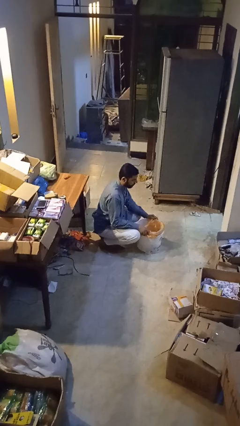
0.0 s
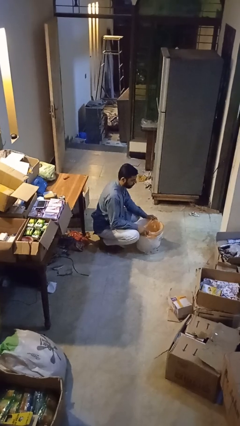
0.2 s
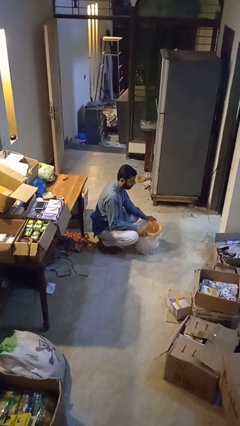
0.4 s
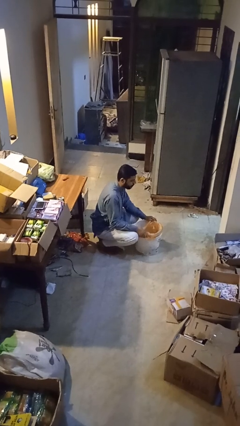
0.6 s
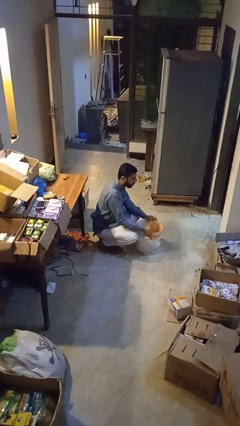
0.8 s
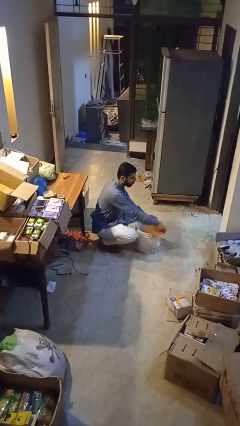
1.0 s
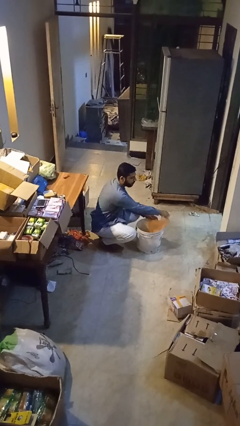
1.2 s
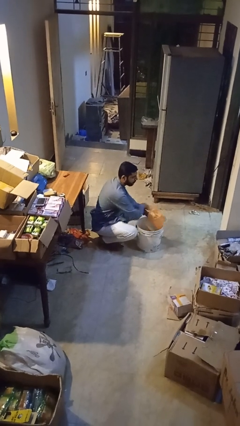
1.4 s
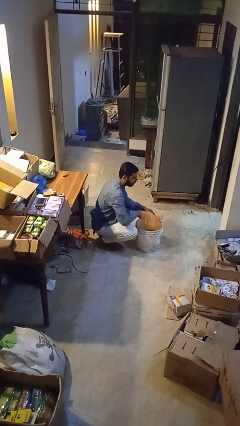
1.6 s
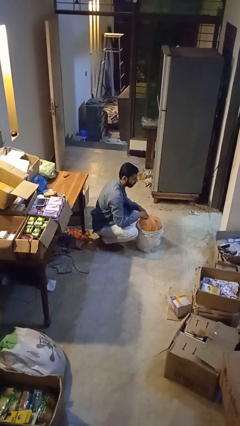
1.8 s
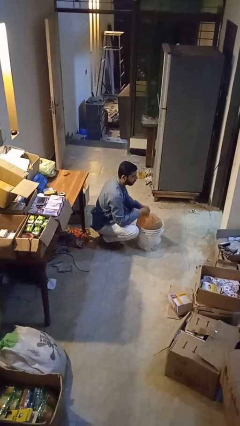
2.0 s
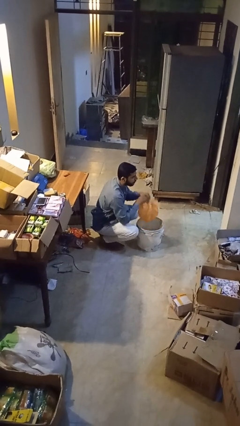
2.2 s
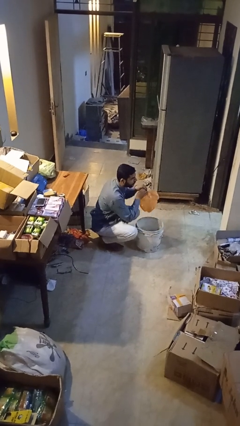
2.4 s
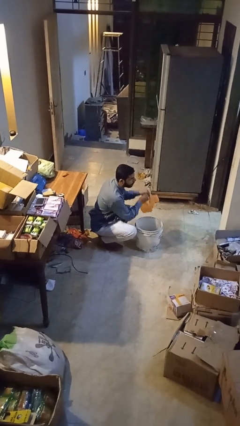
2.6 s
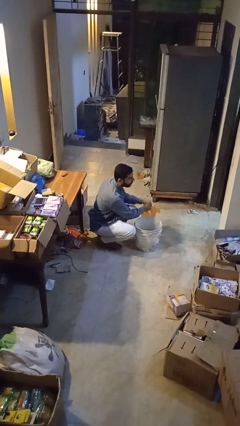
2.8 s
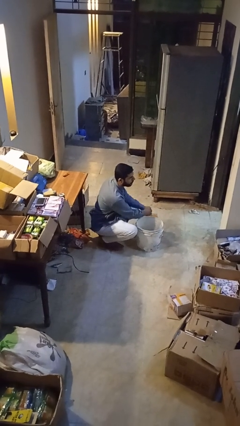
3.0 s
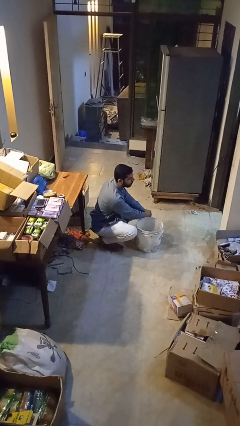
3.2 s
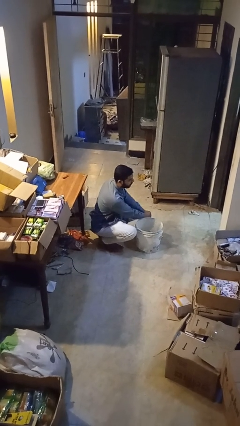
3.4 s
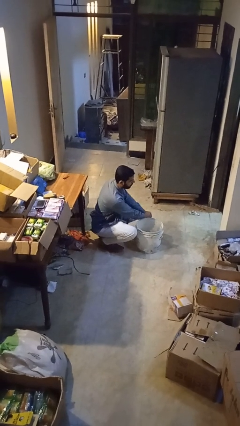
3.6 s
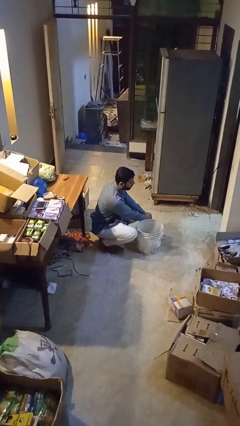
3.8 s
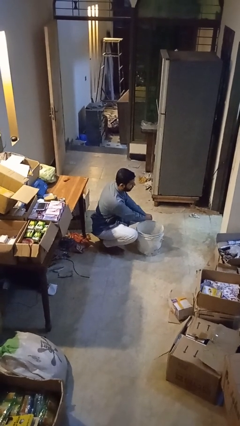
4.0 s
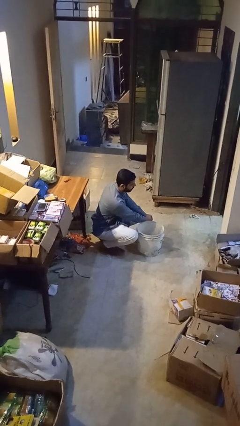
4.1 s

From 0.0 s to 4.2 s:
person removes trashbag from trashcan

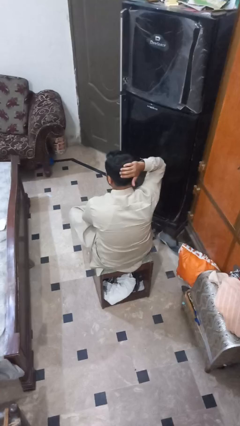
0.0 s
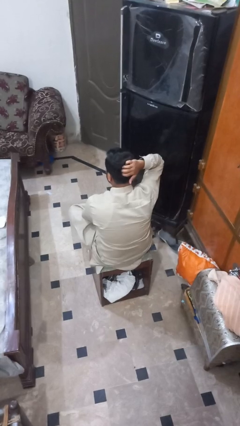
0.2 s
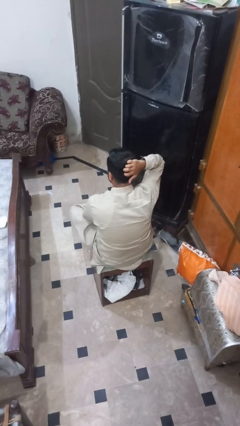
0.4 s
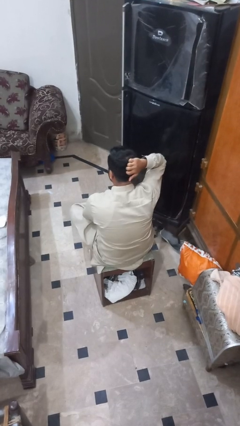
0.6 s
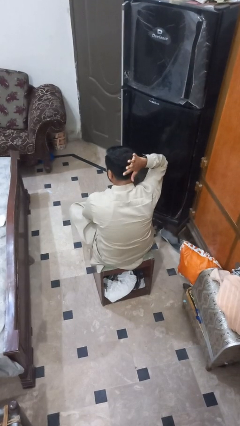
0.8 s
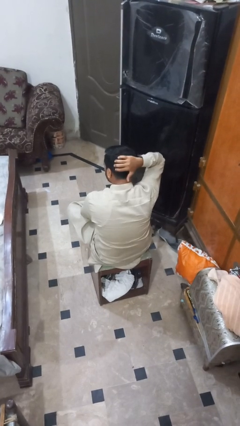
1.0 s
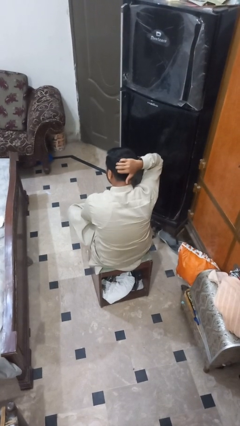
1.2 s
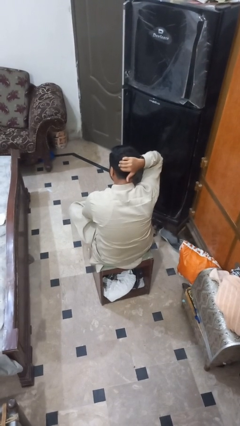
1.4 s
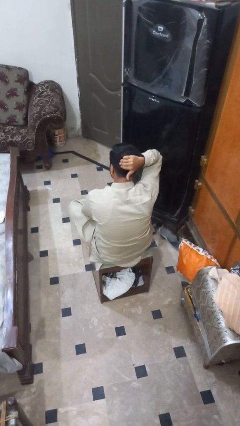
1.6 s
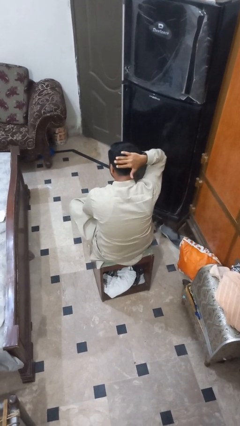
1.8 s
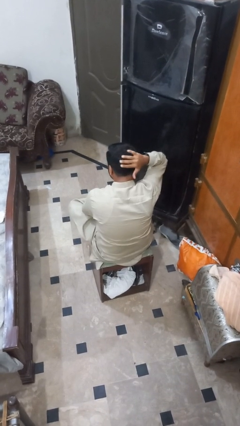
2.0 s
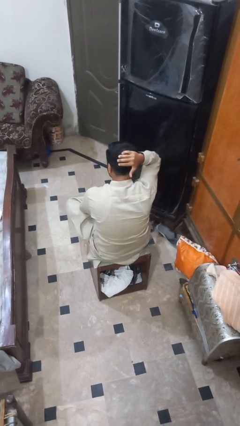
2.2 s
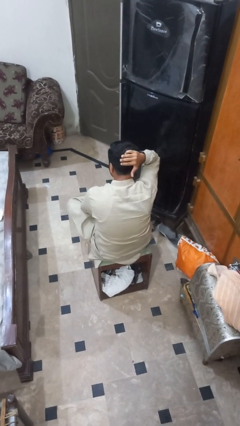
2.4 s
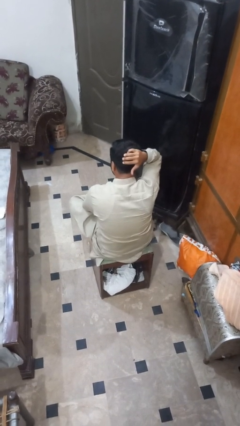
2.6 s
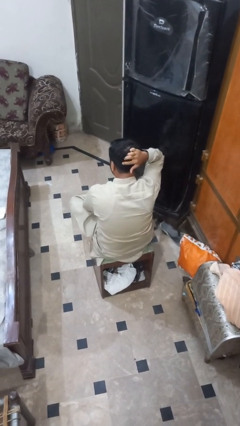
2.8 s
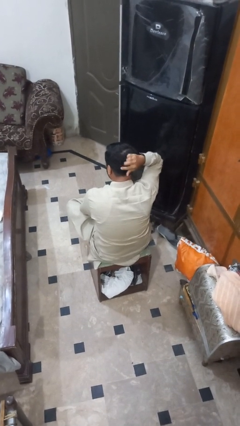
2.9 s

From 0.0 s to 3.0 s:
person strokes hair

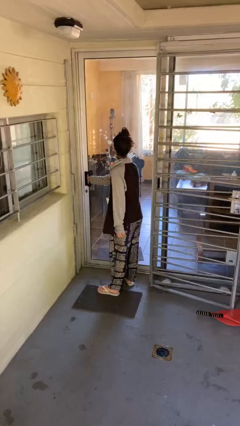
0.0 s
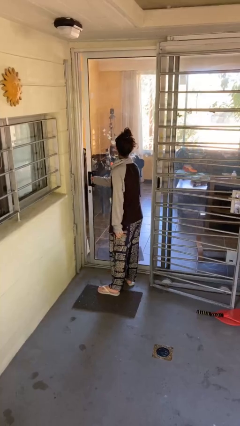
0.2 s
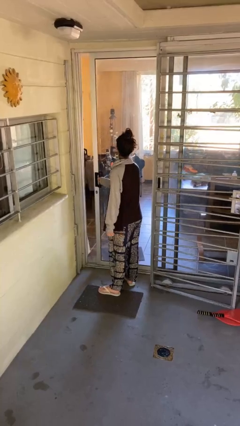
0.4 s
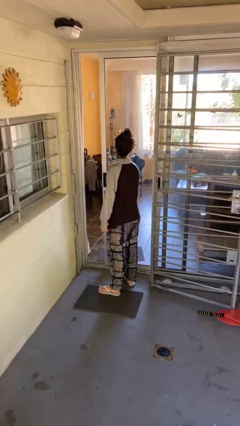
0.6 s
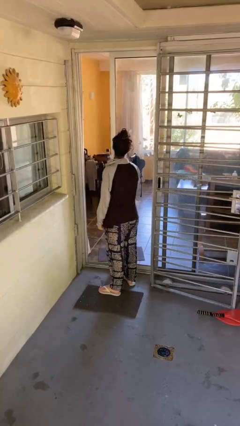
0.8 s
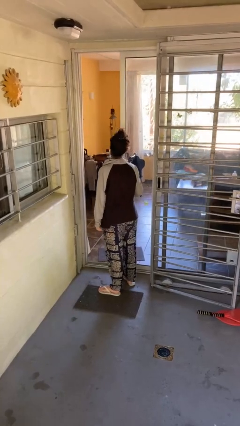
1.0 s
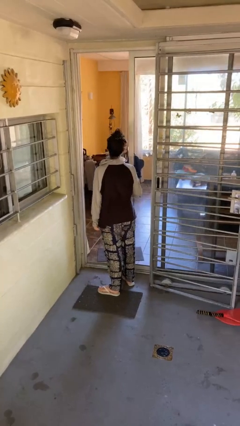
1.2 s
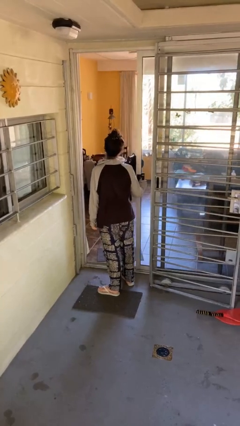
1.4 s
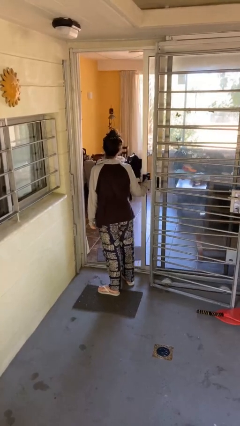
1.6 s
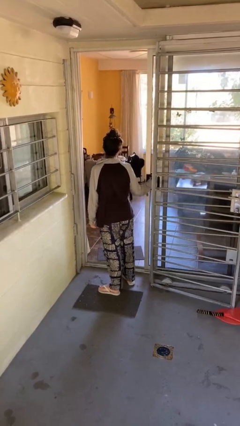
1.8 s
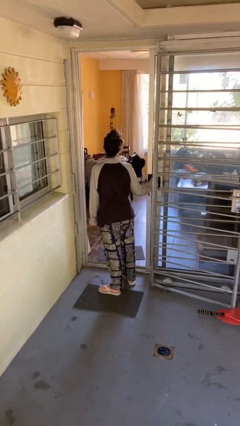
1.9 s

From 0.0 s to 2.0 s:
person opens facility door

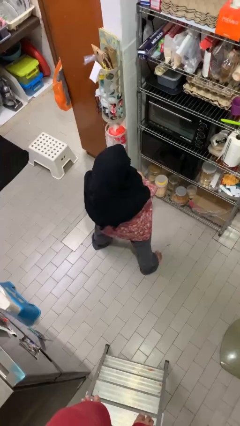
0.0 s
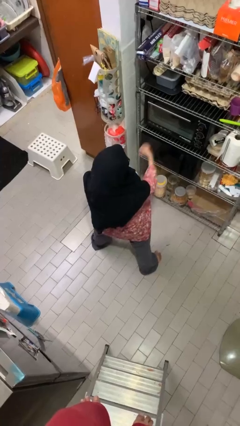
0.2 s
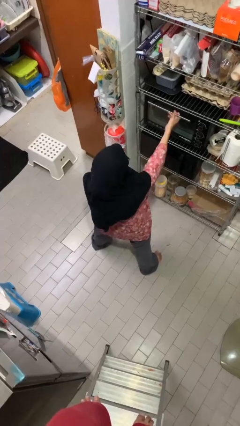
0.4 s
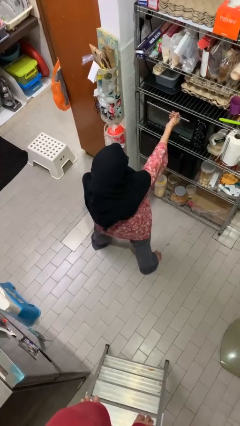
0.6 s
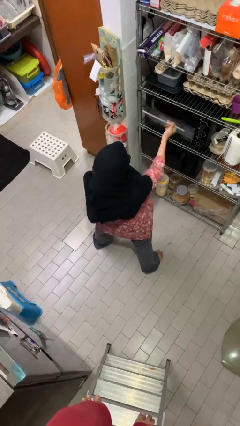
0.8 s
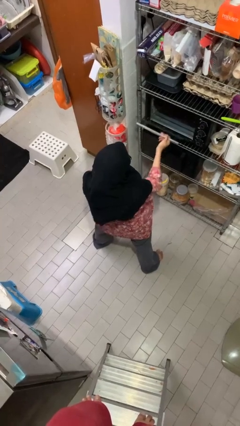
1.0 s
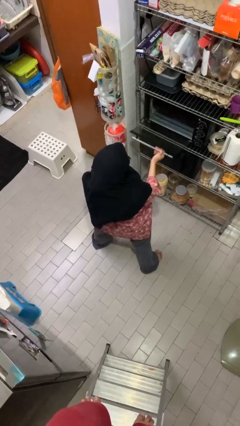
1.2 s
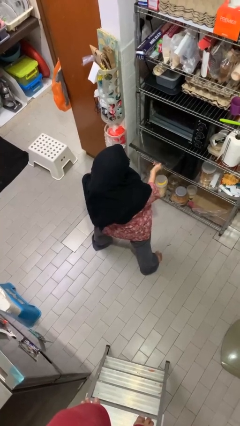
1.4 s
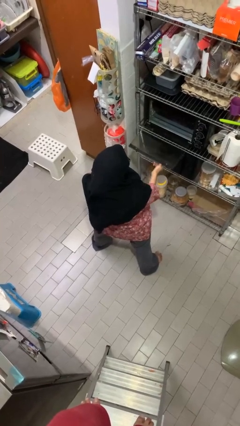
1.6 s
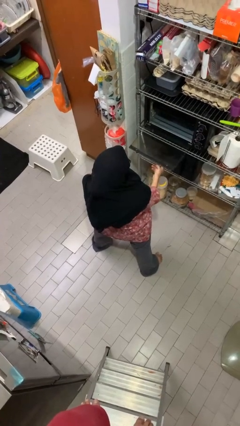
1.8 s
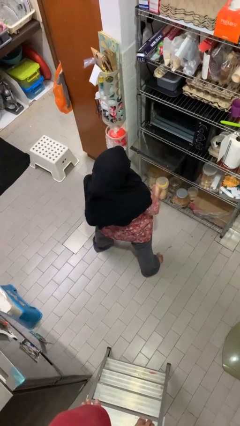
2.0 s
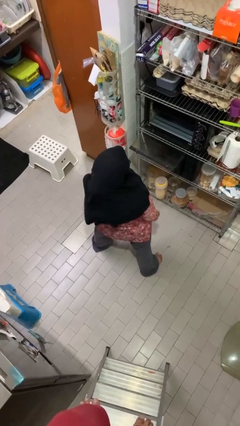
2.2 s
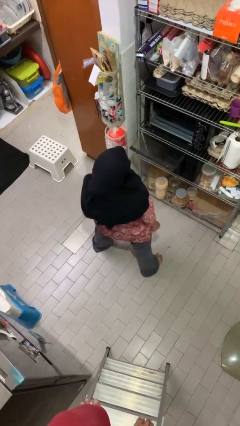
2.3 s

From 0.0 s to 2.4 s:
person opens oven door

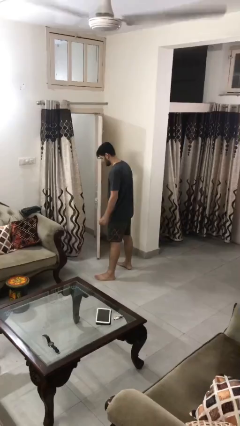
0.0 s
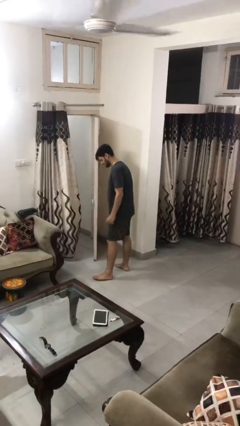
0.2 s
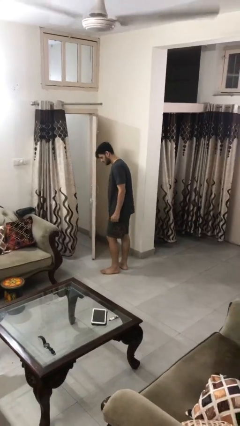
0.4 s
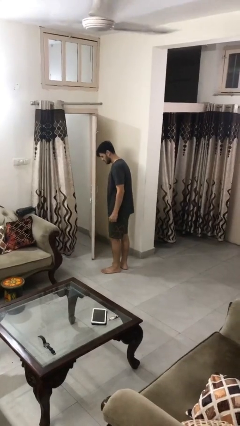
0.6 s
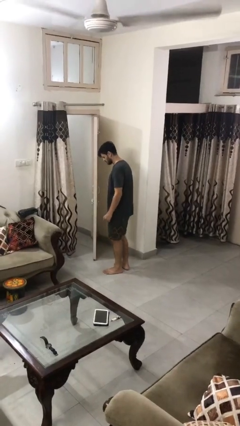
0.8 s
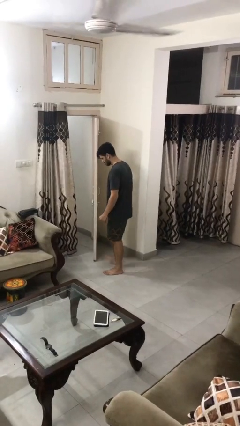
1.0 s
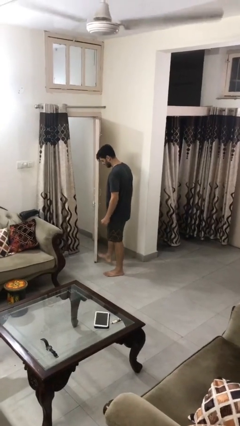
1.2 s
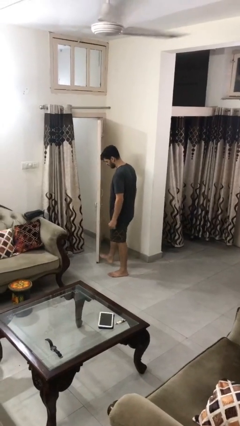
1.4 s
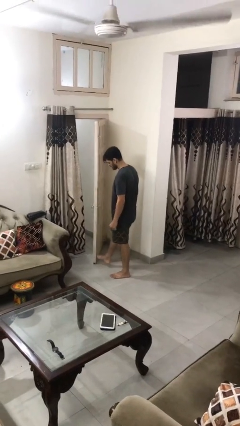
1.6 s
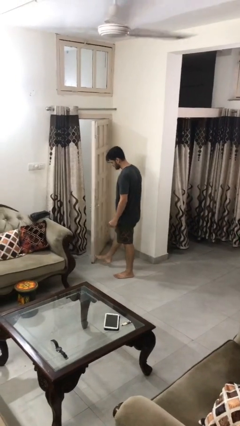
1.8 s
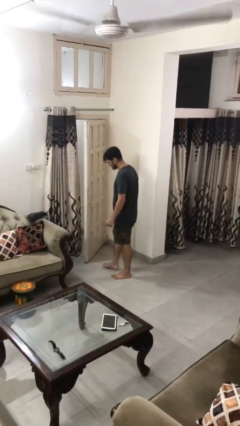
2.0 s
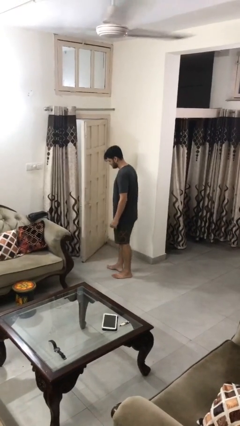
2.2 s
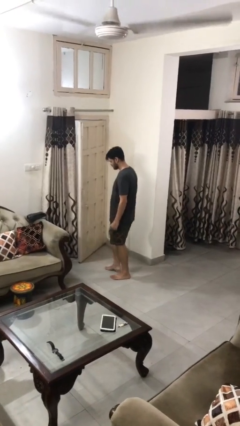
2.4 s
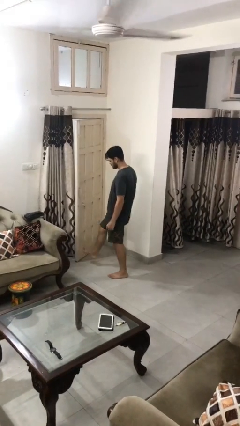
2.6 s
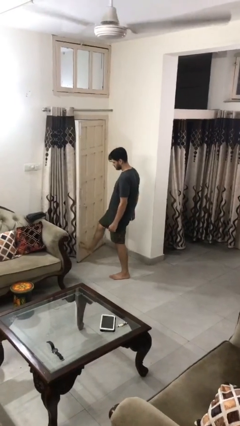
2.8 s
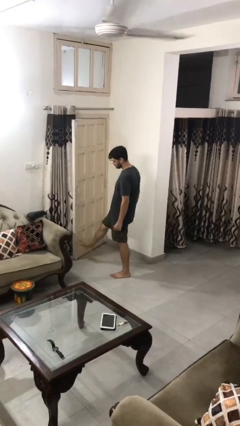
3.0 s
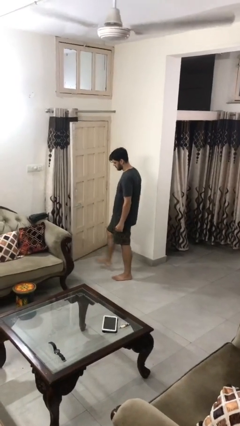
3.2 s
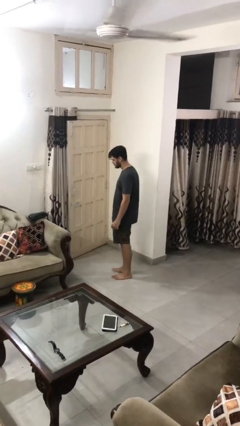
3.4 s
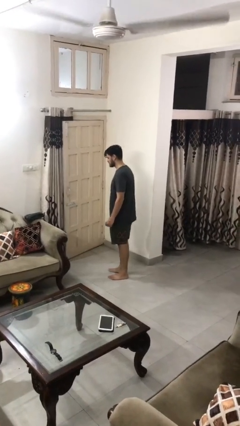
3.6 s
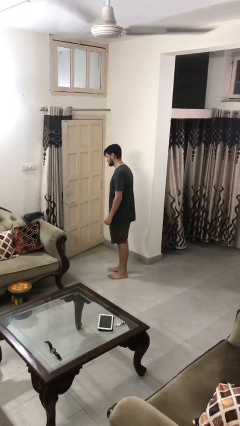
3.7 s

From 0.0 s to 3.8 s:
person closes door with foot

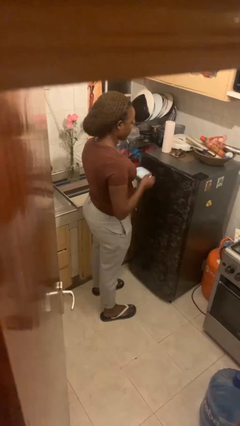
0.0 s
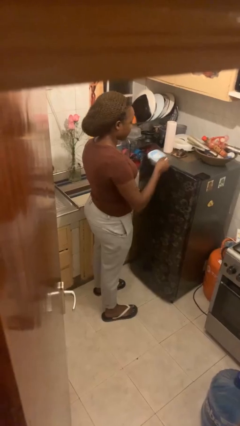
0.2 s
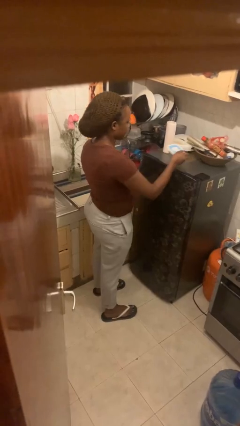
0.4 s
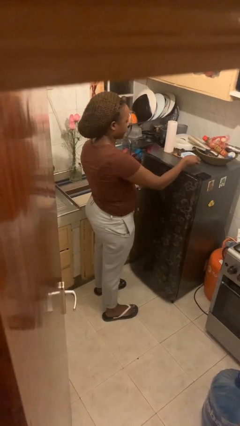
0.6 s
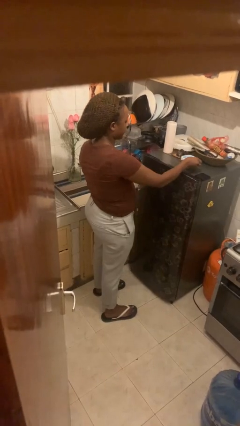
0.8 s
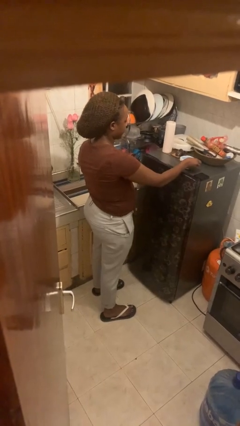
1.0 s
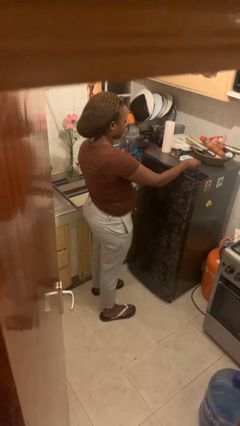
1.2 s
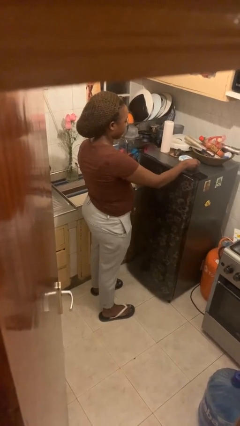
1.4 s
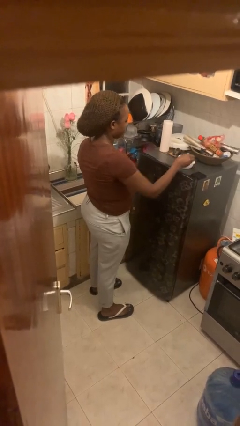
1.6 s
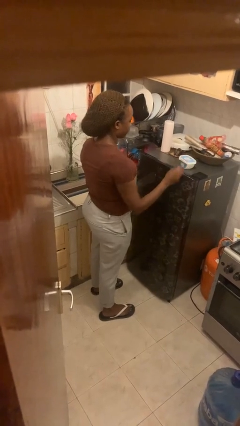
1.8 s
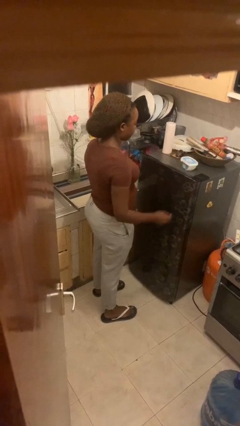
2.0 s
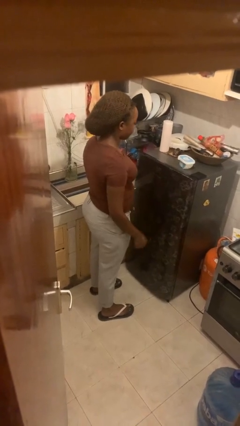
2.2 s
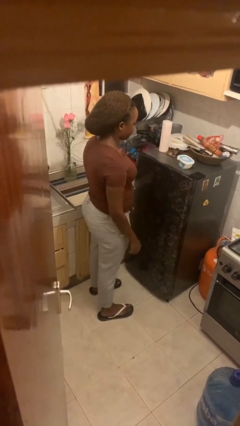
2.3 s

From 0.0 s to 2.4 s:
person puts down object on countertop
